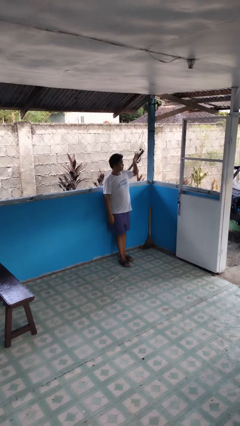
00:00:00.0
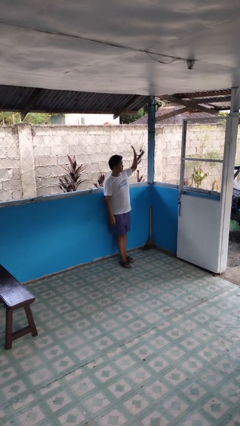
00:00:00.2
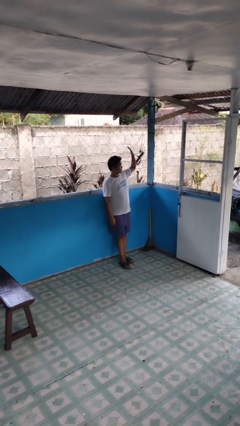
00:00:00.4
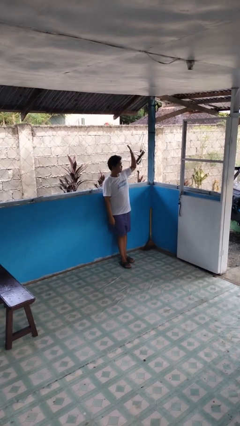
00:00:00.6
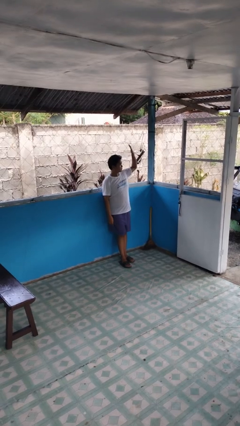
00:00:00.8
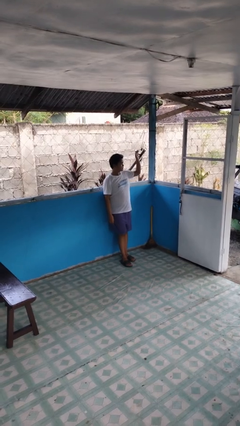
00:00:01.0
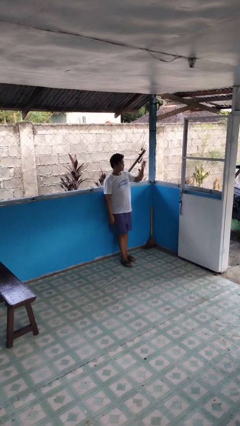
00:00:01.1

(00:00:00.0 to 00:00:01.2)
person gestures number five

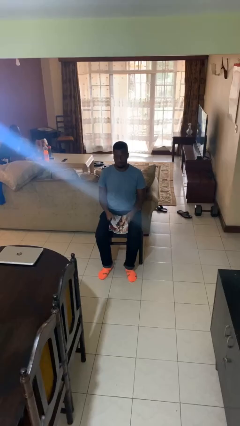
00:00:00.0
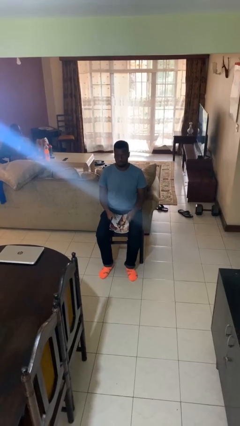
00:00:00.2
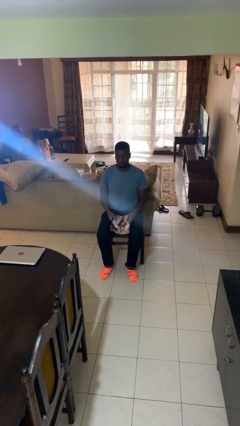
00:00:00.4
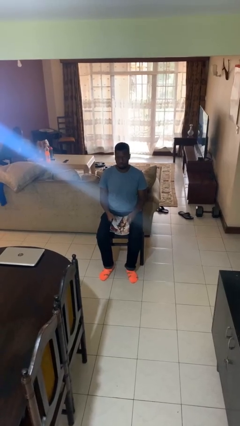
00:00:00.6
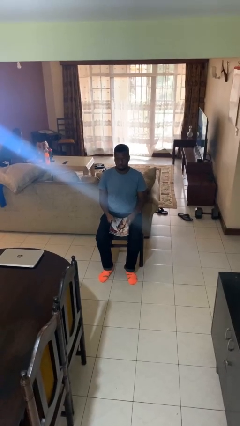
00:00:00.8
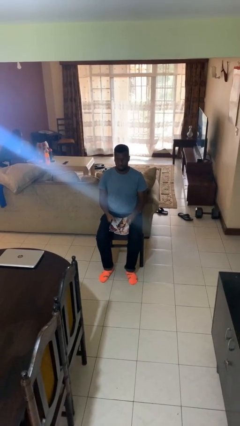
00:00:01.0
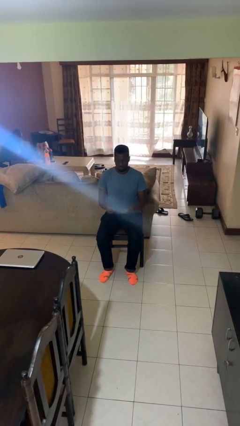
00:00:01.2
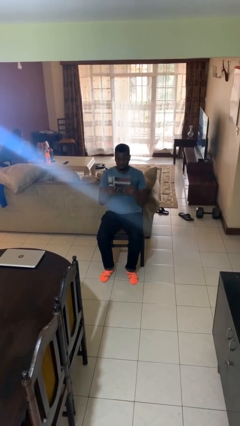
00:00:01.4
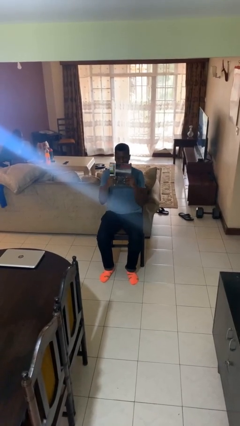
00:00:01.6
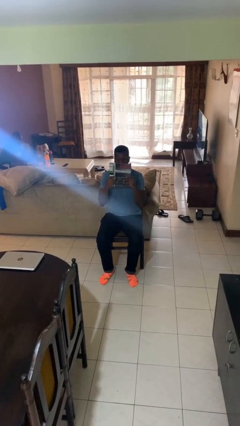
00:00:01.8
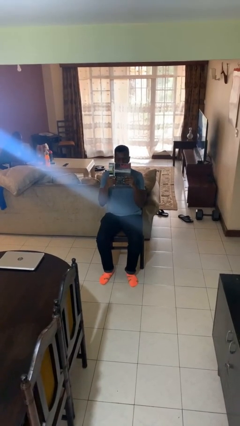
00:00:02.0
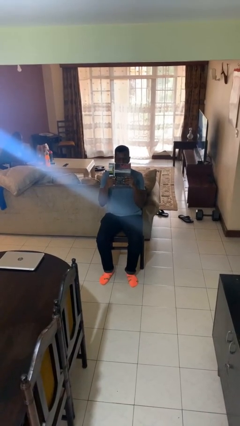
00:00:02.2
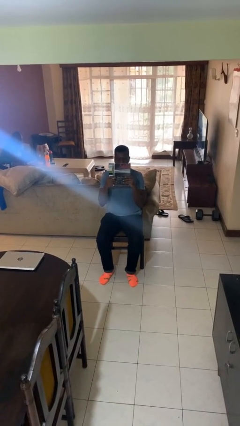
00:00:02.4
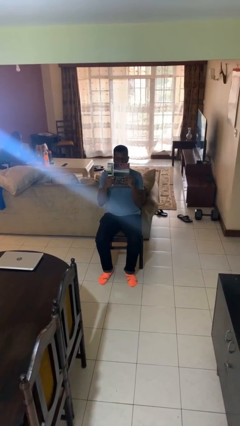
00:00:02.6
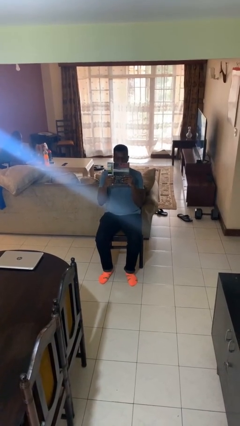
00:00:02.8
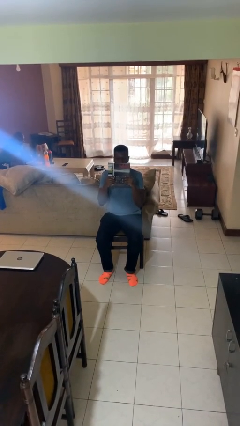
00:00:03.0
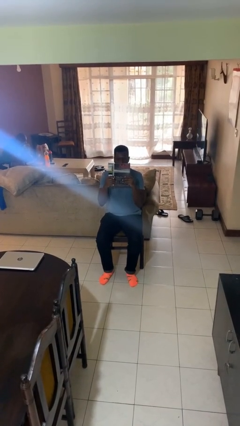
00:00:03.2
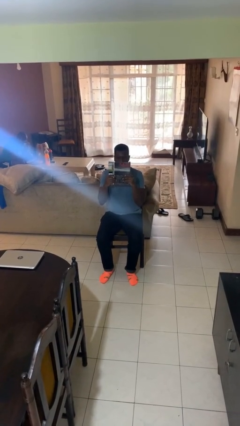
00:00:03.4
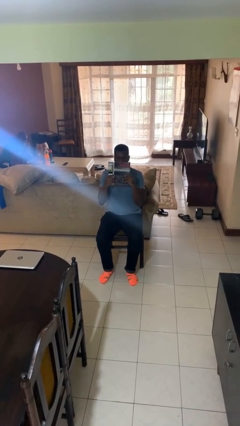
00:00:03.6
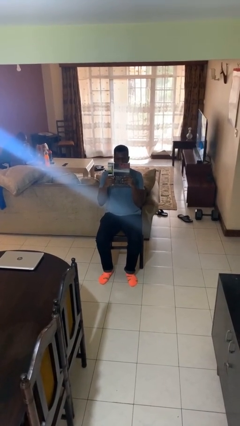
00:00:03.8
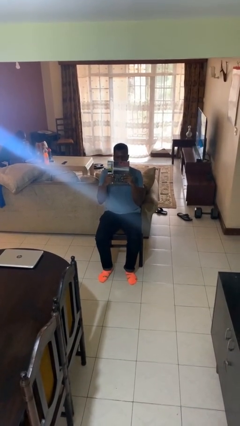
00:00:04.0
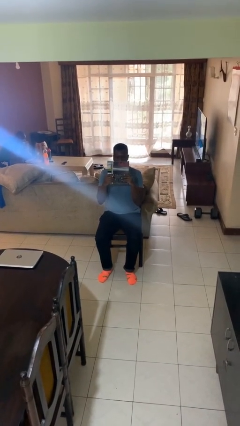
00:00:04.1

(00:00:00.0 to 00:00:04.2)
person reads document

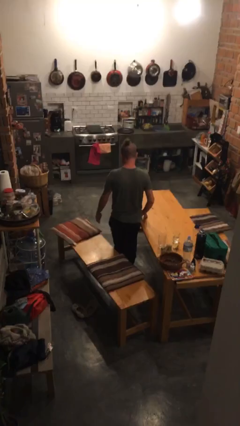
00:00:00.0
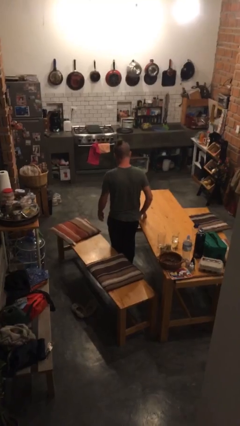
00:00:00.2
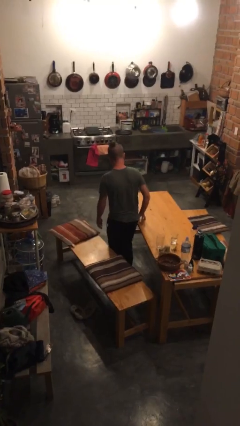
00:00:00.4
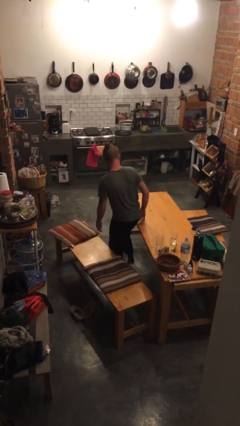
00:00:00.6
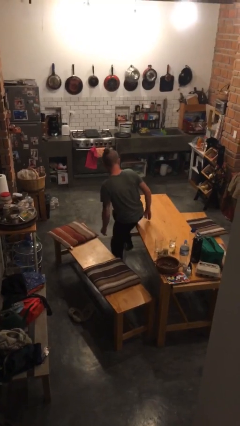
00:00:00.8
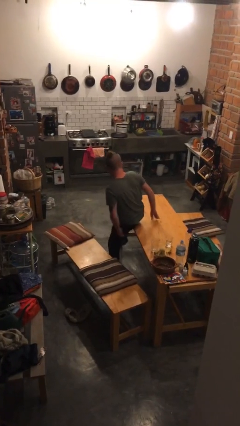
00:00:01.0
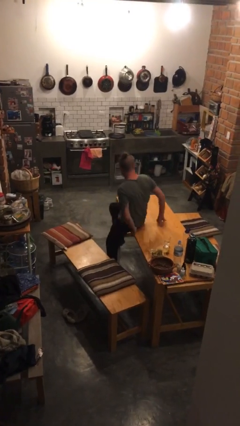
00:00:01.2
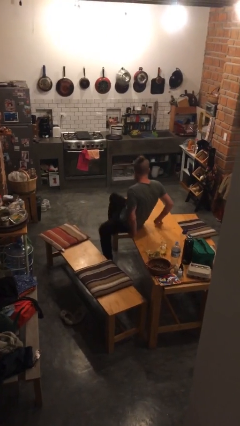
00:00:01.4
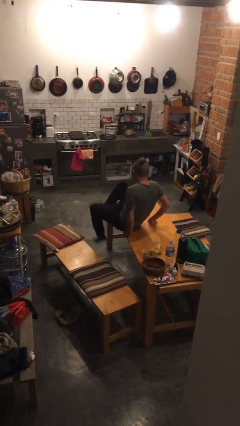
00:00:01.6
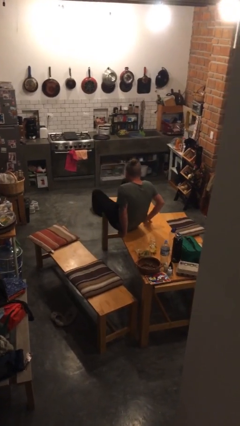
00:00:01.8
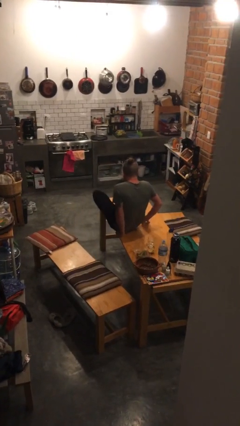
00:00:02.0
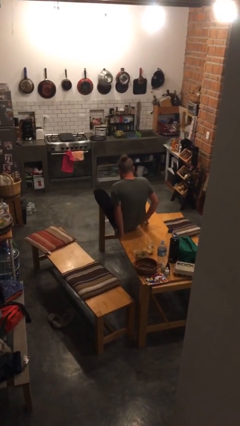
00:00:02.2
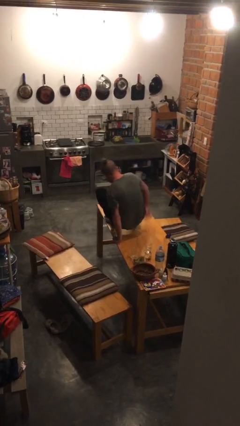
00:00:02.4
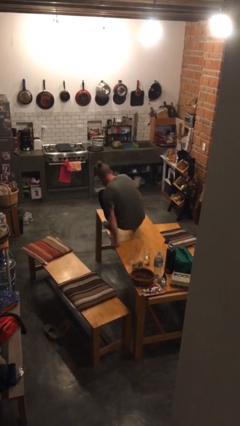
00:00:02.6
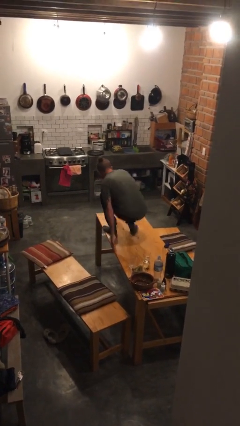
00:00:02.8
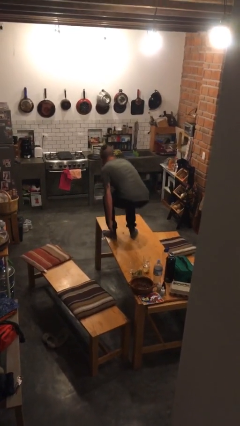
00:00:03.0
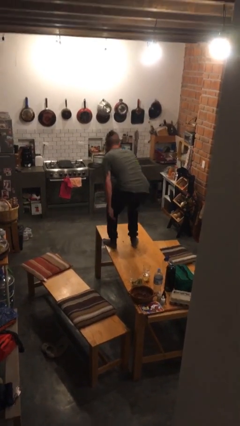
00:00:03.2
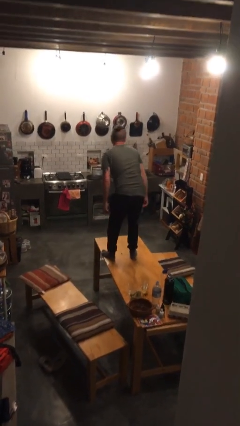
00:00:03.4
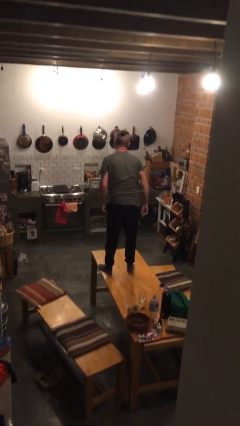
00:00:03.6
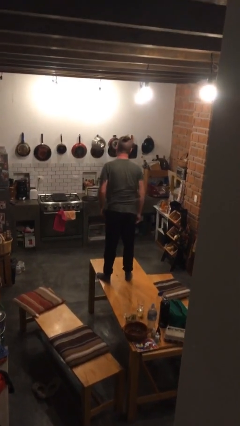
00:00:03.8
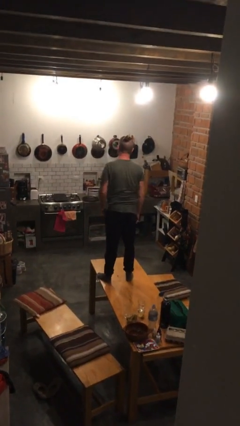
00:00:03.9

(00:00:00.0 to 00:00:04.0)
person climbs on table

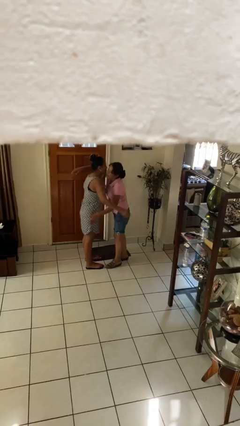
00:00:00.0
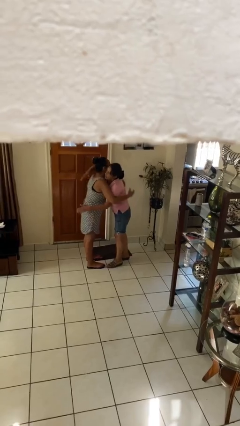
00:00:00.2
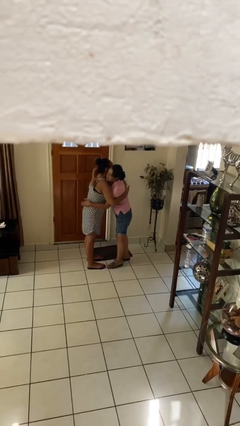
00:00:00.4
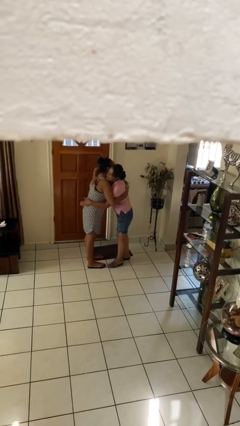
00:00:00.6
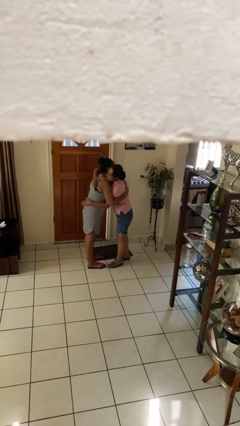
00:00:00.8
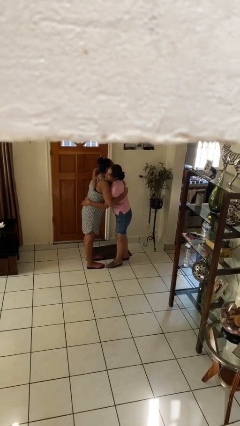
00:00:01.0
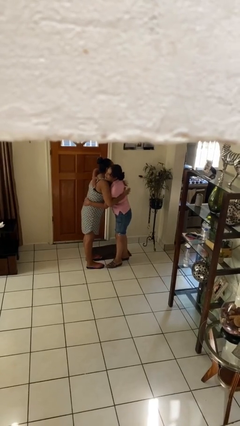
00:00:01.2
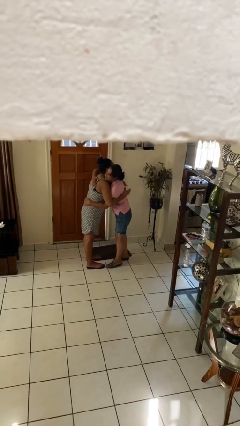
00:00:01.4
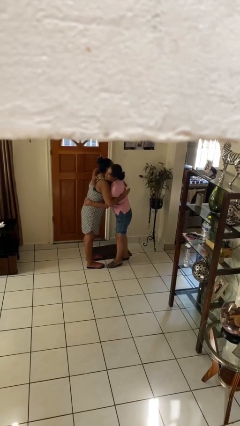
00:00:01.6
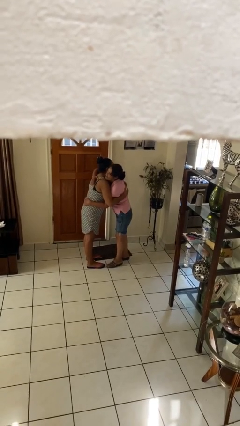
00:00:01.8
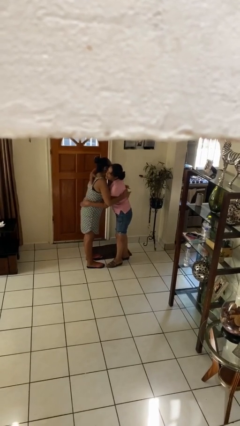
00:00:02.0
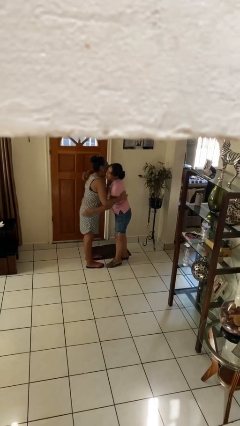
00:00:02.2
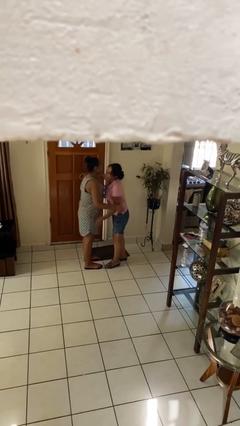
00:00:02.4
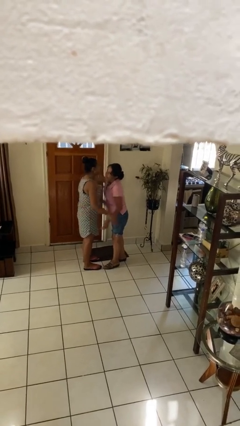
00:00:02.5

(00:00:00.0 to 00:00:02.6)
person embraces person

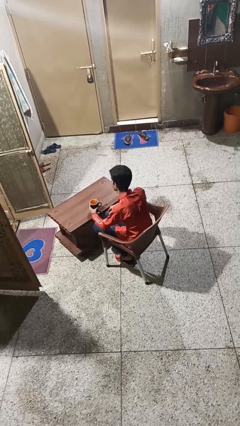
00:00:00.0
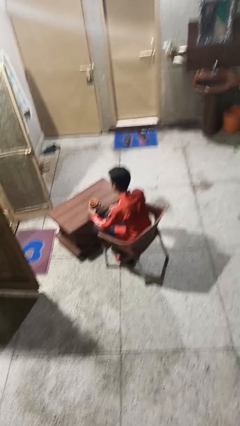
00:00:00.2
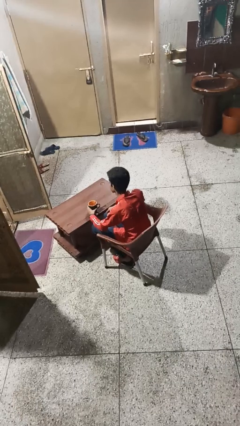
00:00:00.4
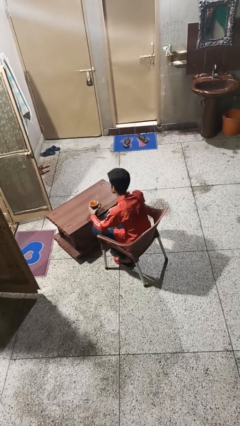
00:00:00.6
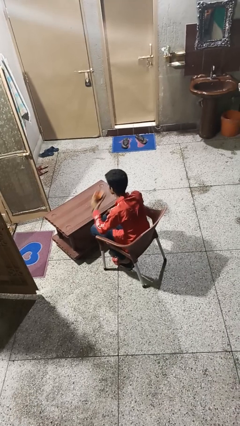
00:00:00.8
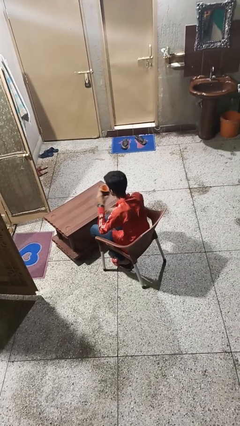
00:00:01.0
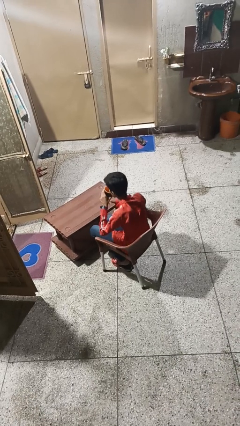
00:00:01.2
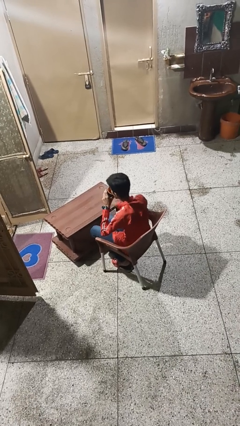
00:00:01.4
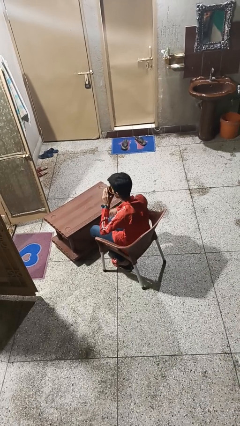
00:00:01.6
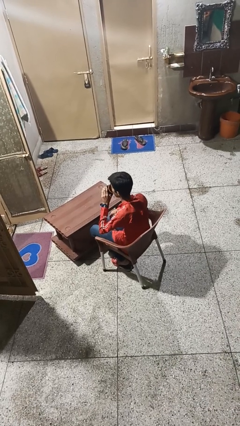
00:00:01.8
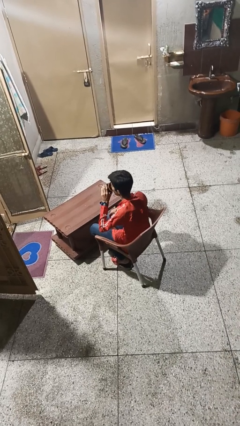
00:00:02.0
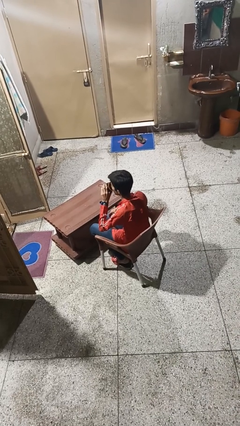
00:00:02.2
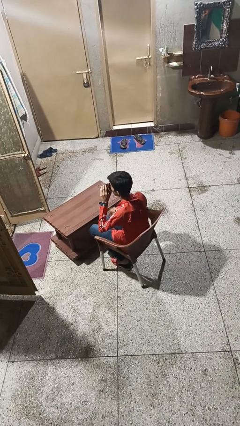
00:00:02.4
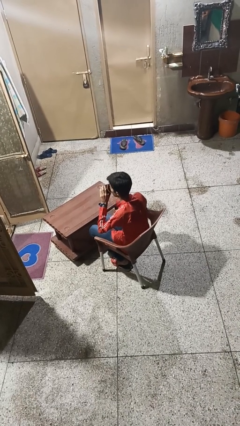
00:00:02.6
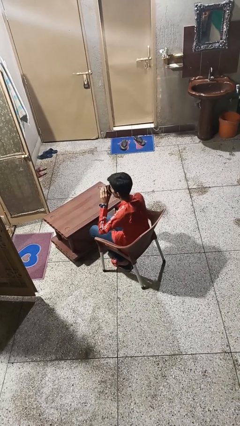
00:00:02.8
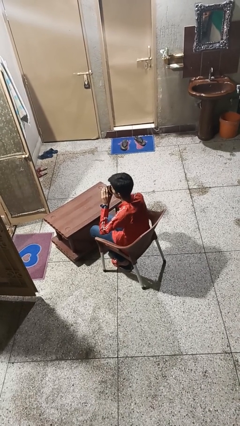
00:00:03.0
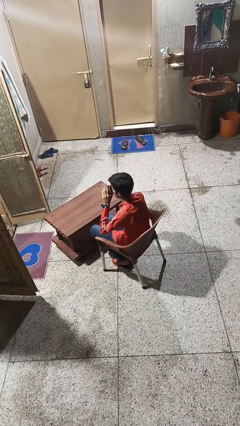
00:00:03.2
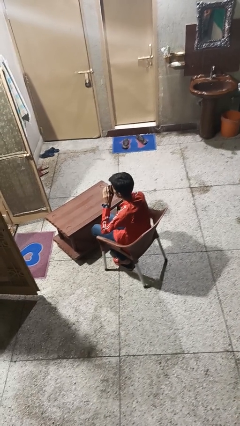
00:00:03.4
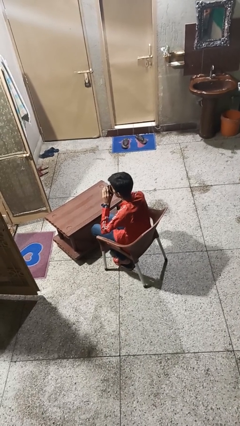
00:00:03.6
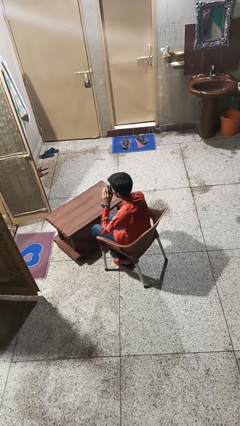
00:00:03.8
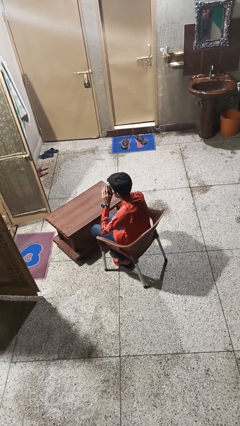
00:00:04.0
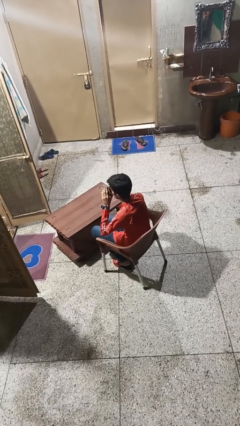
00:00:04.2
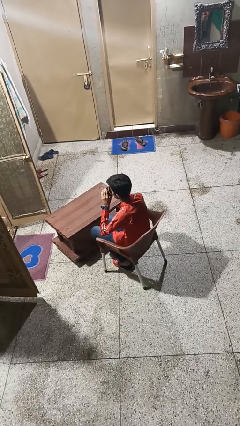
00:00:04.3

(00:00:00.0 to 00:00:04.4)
person drinks from mug

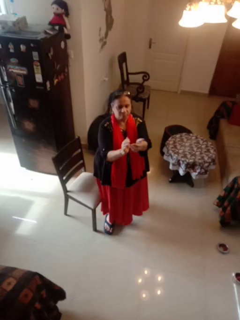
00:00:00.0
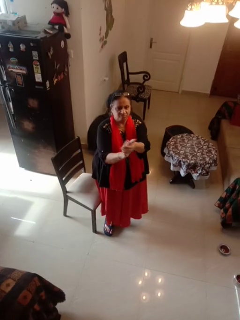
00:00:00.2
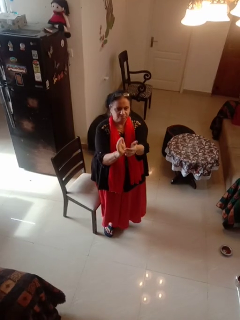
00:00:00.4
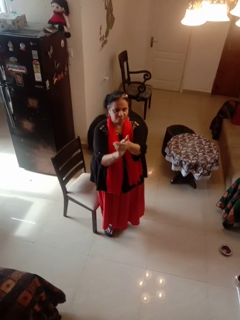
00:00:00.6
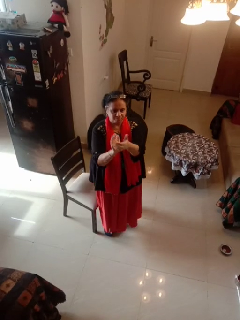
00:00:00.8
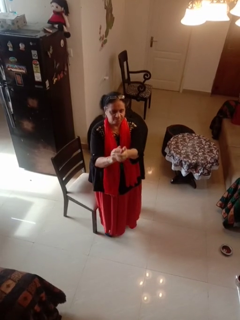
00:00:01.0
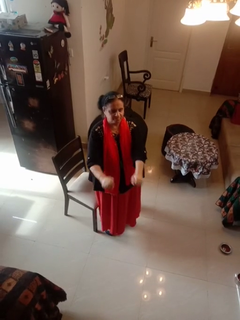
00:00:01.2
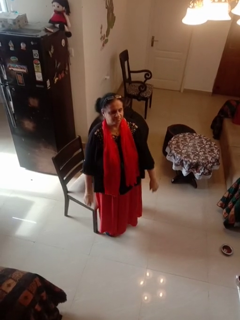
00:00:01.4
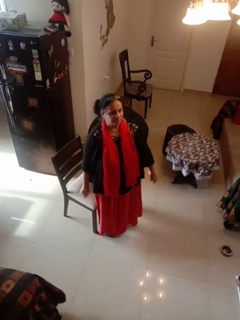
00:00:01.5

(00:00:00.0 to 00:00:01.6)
person claps hands

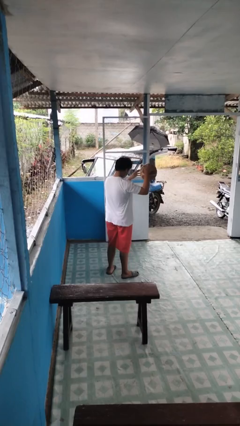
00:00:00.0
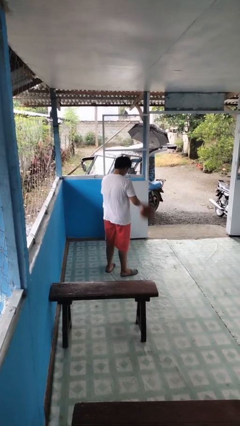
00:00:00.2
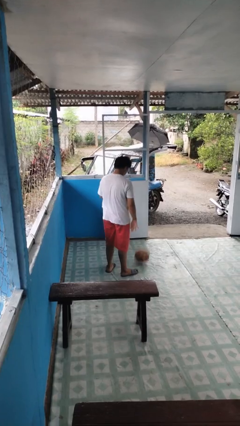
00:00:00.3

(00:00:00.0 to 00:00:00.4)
person bounces ball on floor
